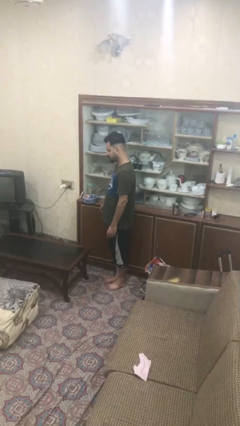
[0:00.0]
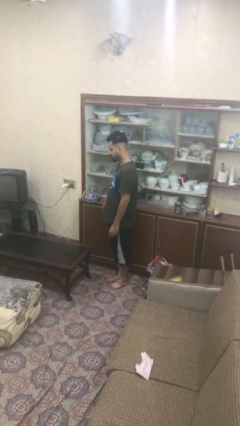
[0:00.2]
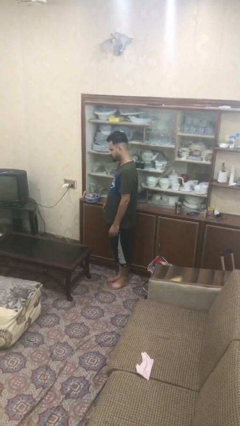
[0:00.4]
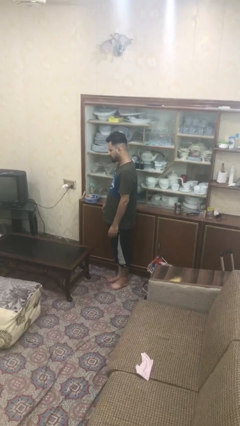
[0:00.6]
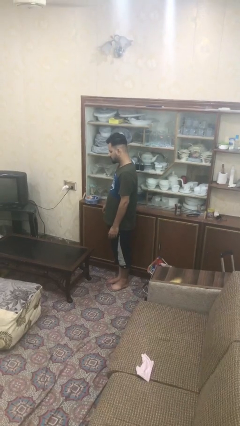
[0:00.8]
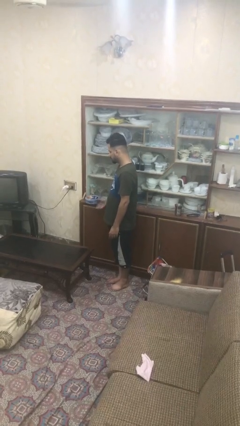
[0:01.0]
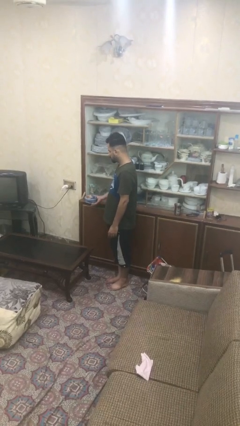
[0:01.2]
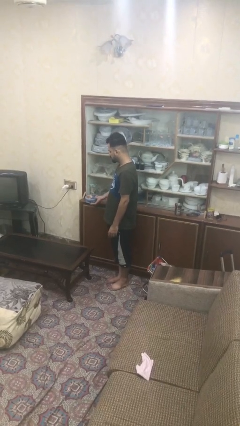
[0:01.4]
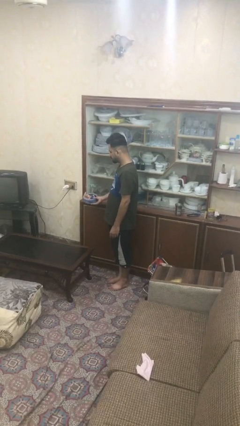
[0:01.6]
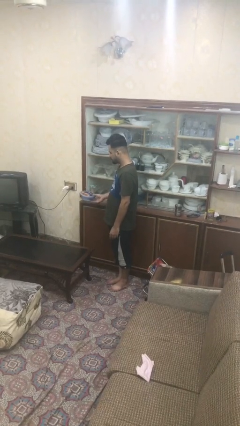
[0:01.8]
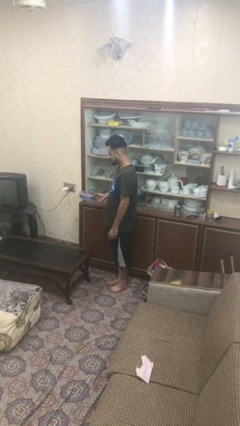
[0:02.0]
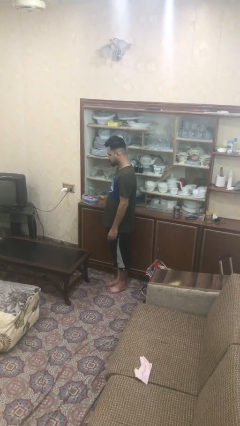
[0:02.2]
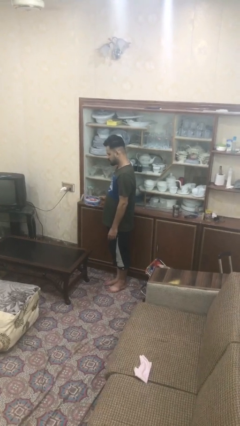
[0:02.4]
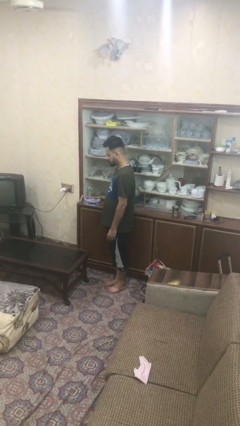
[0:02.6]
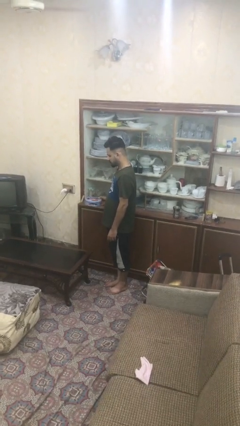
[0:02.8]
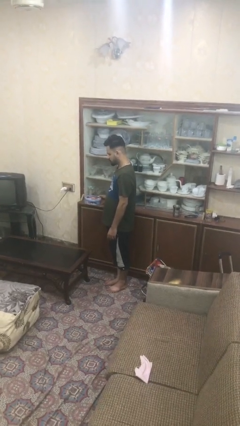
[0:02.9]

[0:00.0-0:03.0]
person picks up object from shelf

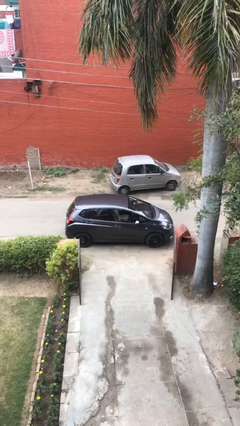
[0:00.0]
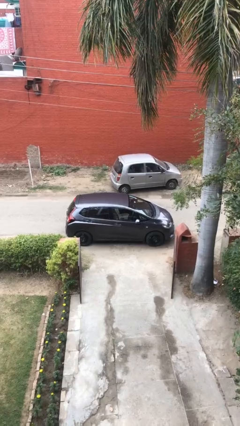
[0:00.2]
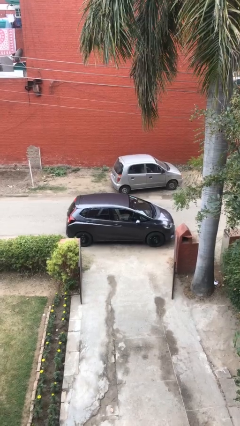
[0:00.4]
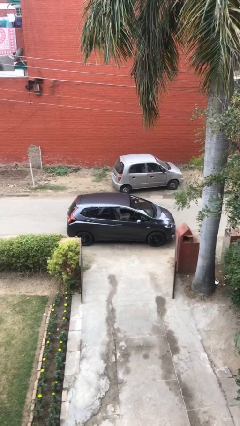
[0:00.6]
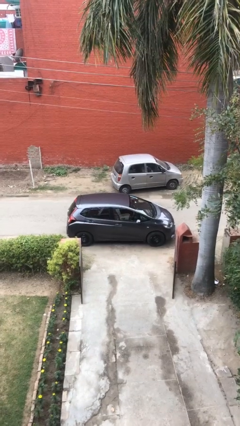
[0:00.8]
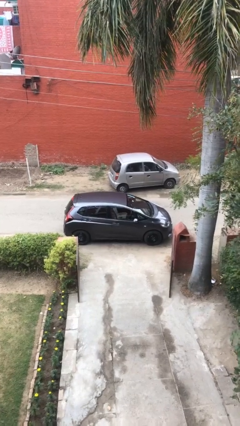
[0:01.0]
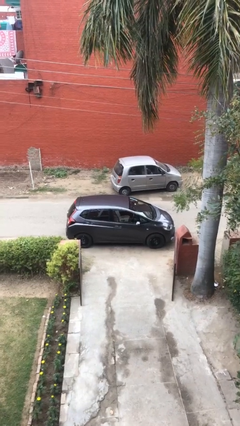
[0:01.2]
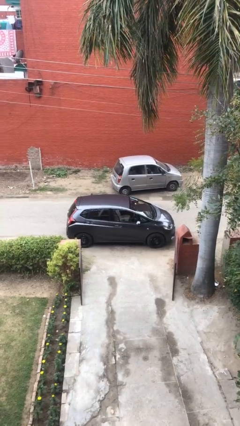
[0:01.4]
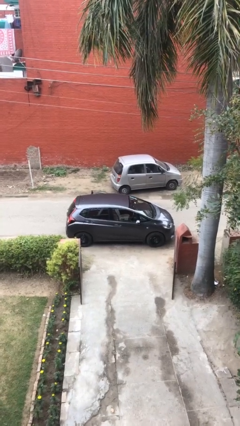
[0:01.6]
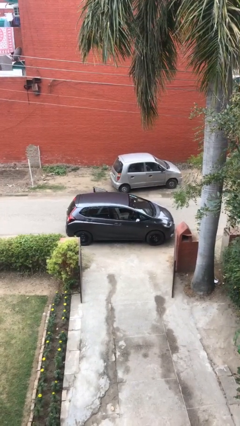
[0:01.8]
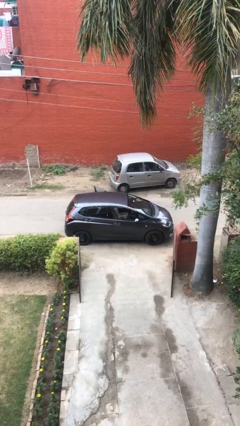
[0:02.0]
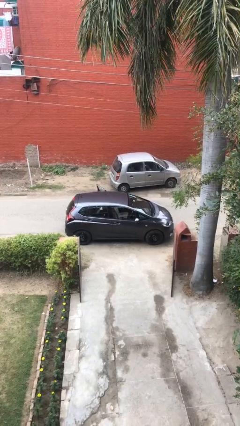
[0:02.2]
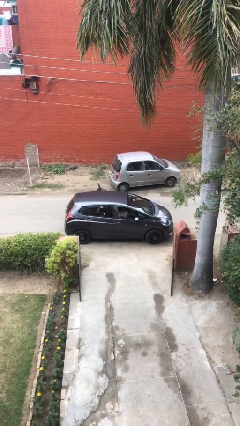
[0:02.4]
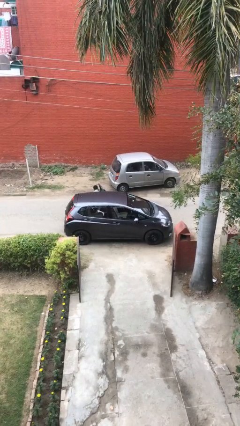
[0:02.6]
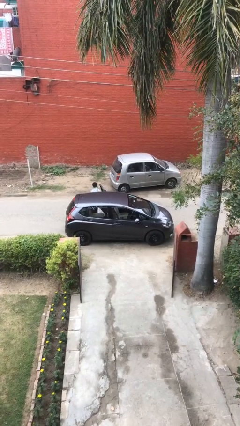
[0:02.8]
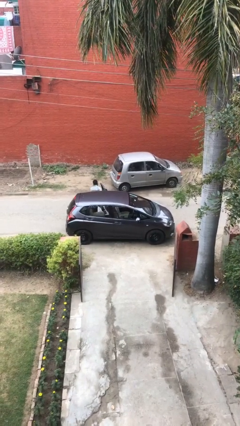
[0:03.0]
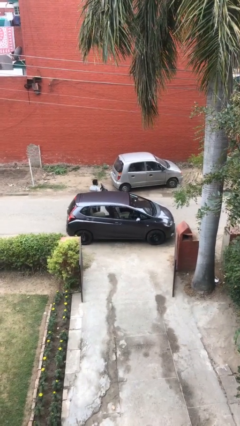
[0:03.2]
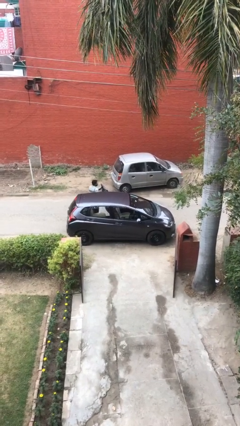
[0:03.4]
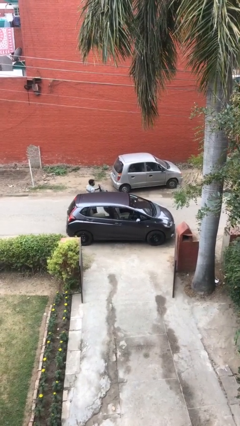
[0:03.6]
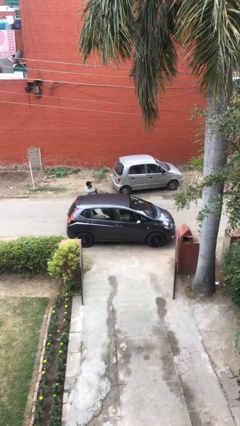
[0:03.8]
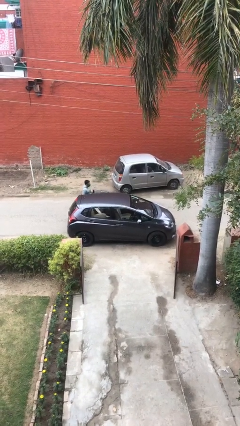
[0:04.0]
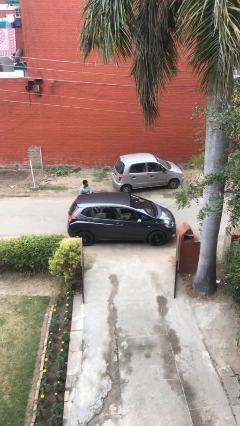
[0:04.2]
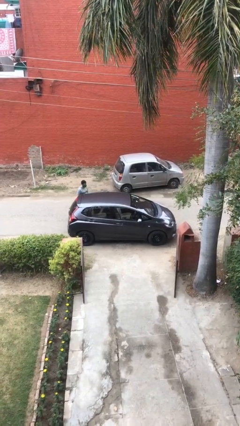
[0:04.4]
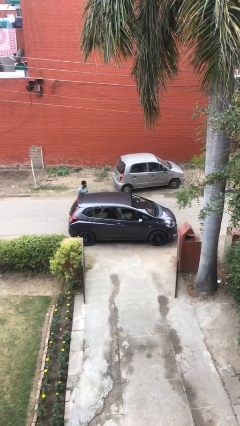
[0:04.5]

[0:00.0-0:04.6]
car drops off person

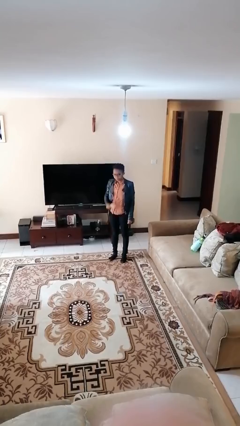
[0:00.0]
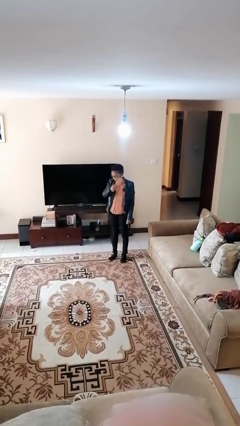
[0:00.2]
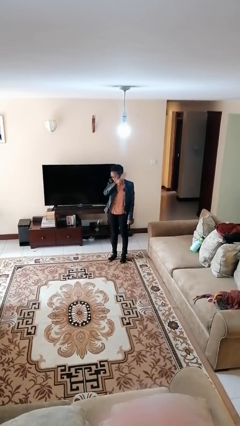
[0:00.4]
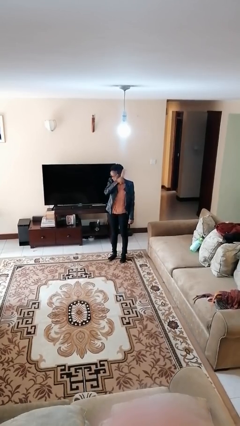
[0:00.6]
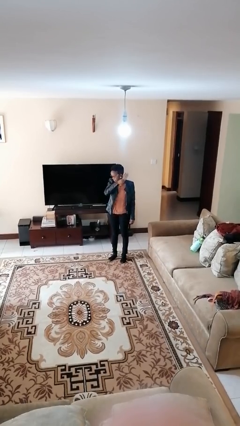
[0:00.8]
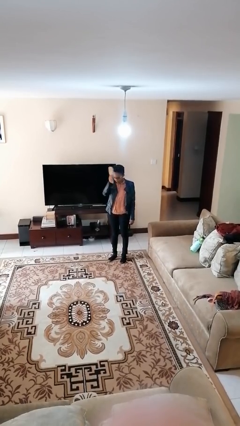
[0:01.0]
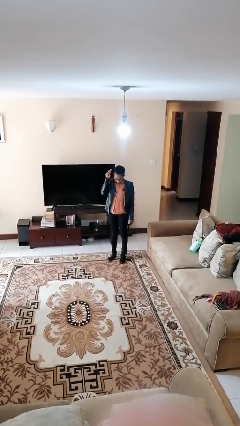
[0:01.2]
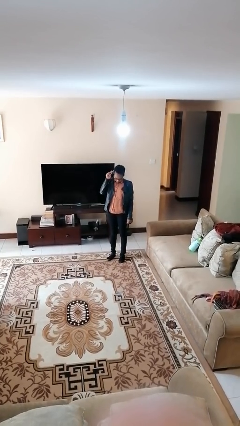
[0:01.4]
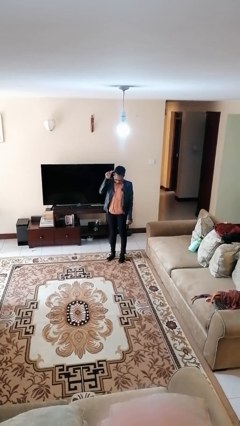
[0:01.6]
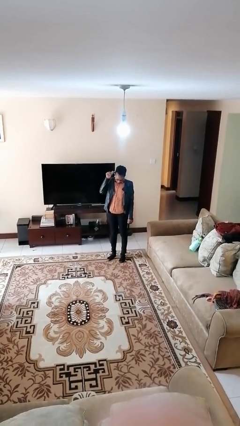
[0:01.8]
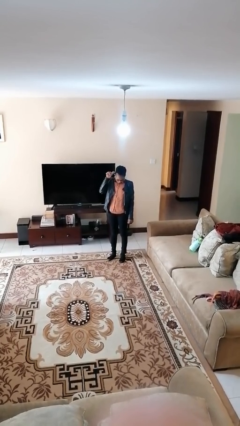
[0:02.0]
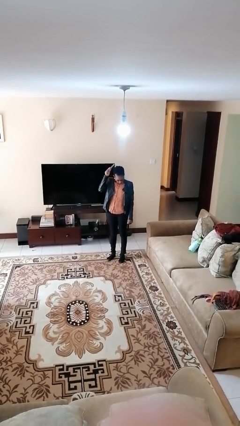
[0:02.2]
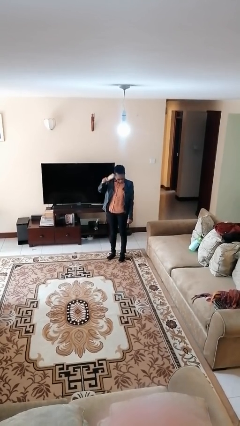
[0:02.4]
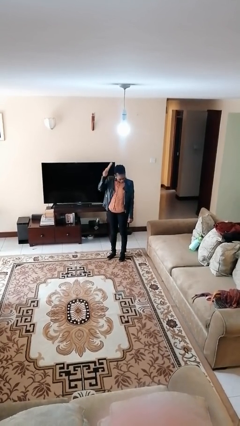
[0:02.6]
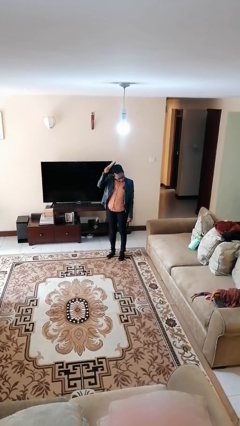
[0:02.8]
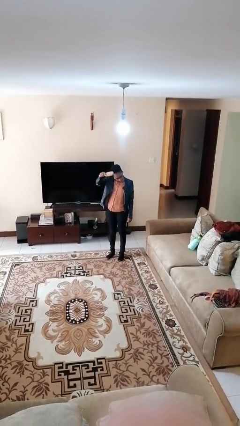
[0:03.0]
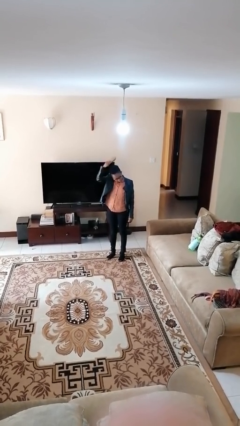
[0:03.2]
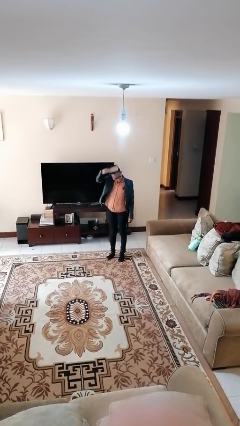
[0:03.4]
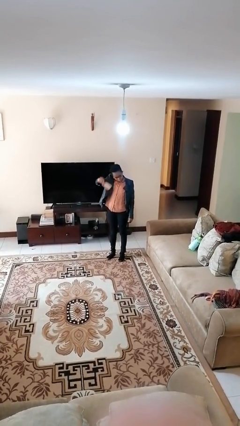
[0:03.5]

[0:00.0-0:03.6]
person brushes hair

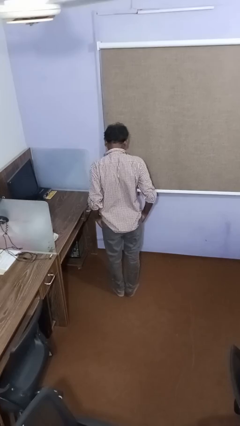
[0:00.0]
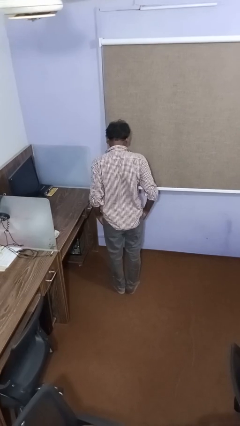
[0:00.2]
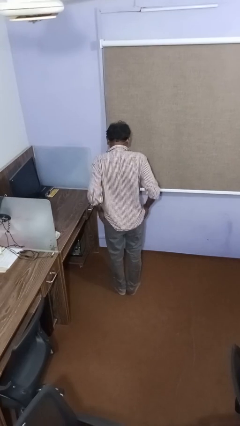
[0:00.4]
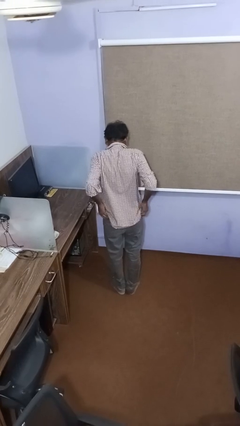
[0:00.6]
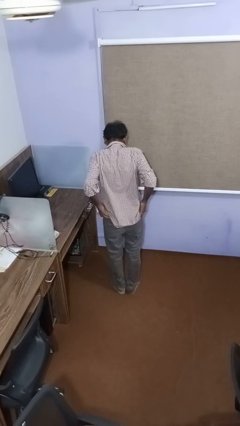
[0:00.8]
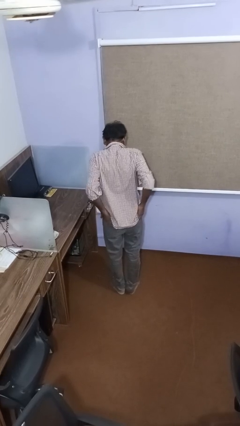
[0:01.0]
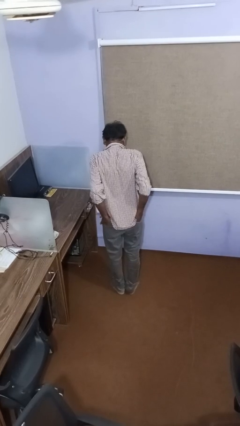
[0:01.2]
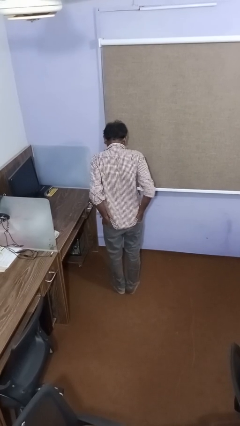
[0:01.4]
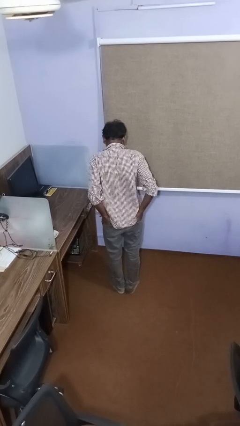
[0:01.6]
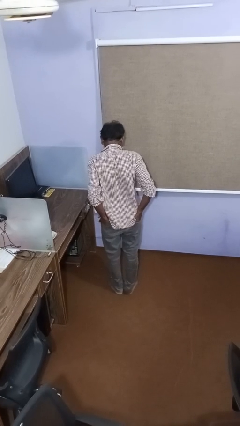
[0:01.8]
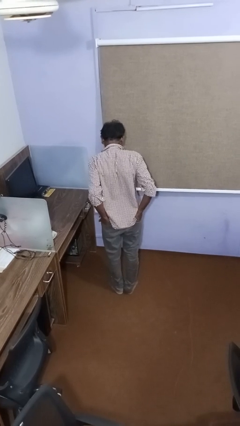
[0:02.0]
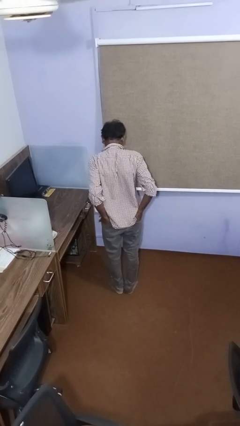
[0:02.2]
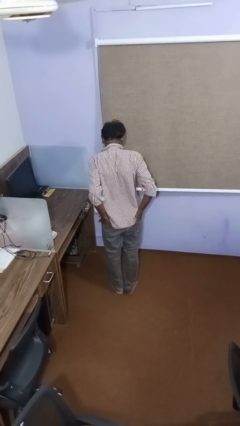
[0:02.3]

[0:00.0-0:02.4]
person puts hands in back pockets

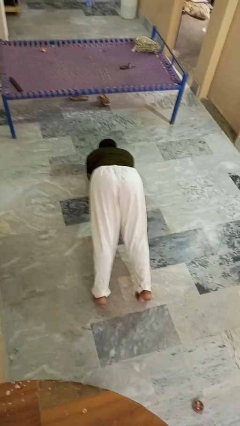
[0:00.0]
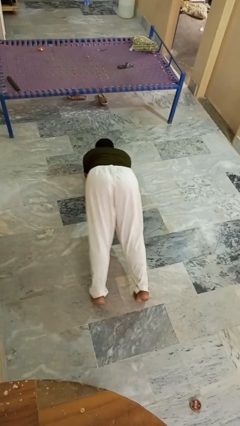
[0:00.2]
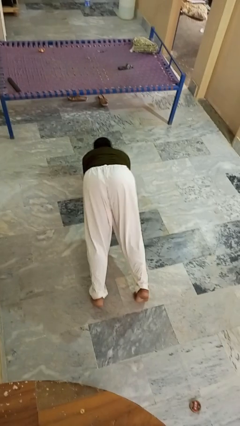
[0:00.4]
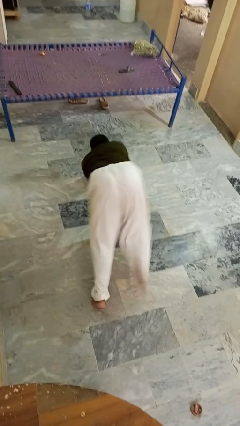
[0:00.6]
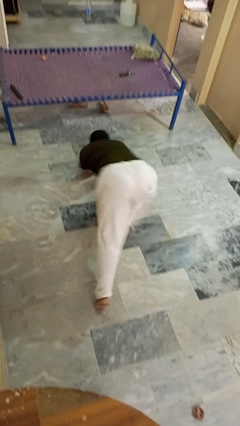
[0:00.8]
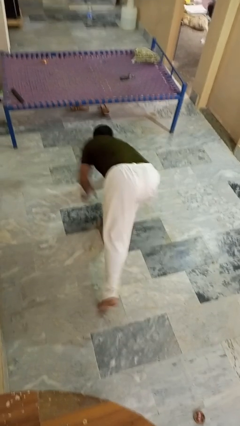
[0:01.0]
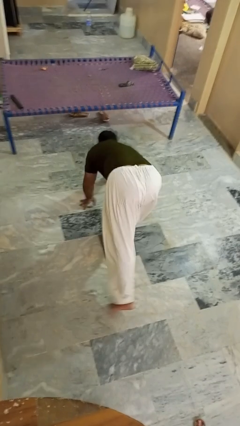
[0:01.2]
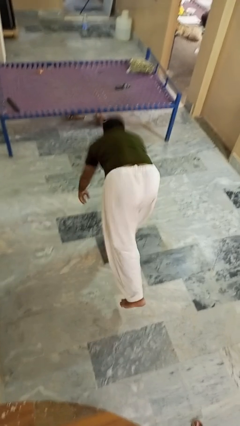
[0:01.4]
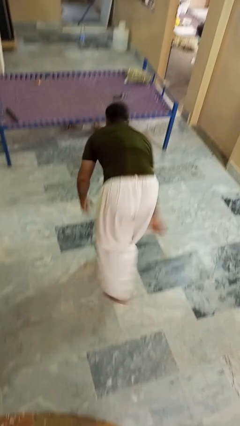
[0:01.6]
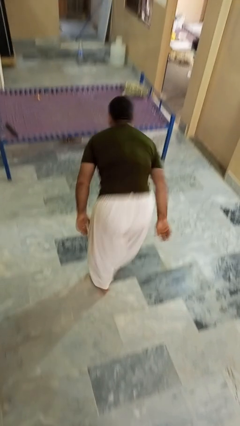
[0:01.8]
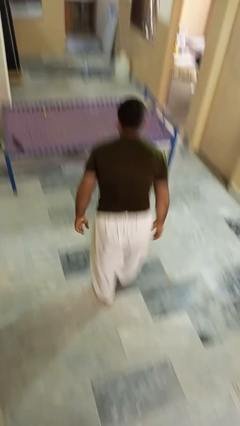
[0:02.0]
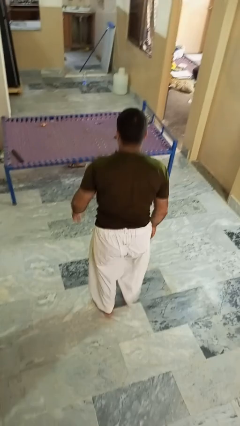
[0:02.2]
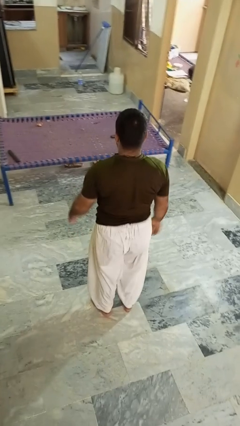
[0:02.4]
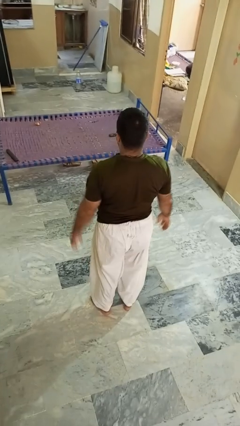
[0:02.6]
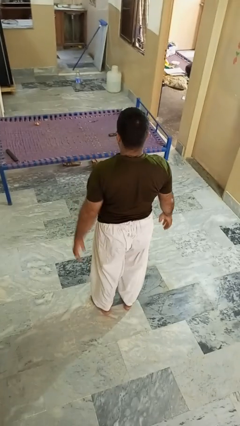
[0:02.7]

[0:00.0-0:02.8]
person stands up from floor

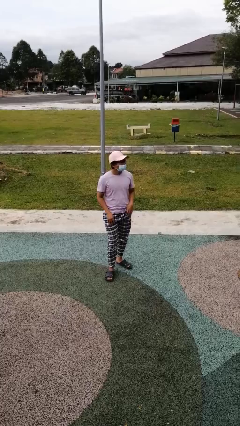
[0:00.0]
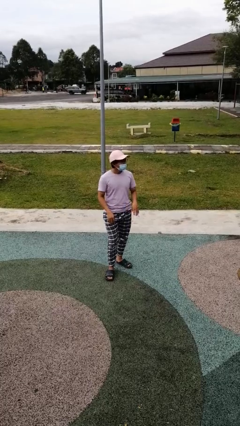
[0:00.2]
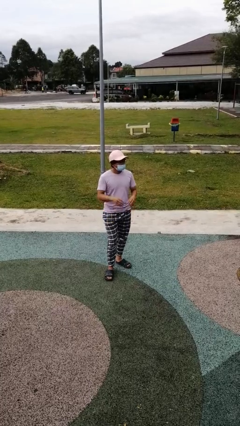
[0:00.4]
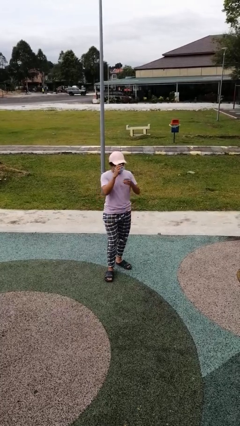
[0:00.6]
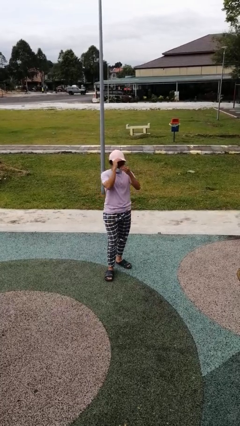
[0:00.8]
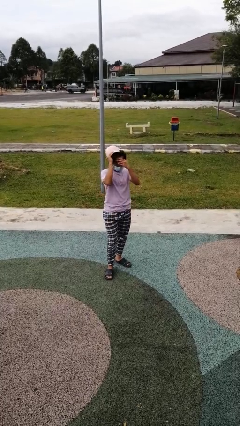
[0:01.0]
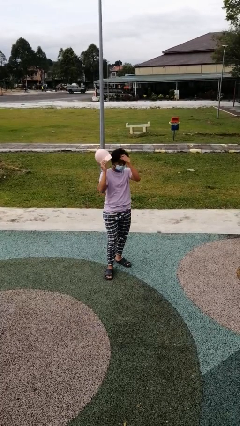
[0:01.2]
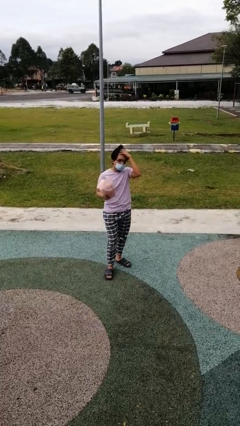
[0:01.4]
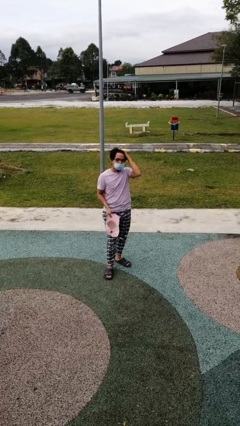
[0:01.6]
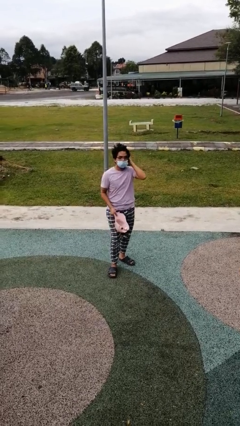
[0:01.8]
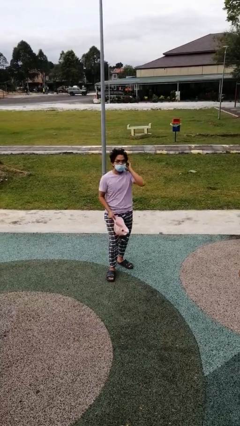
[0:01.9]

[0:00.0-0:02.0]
person takes off hat
